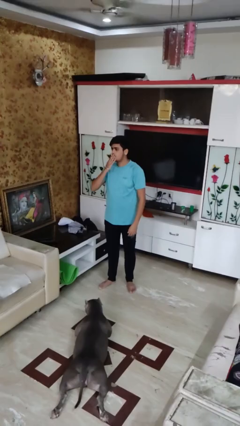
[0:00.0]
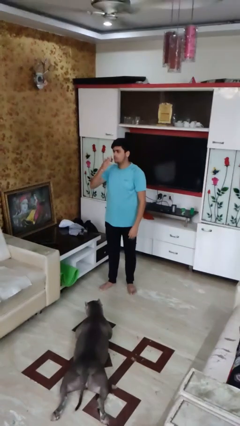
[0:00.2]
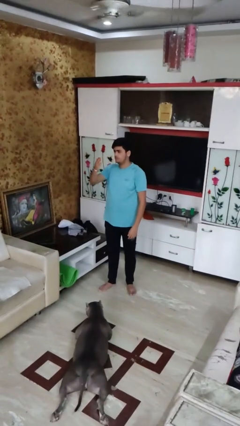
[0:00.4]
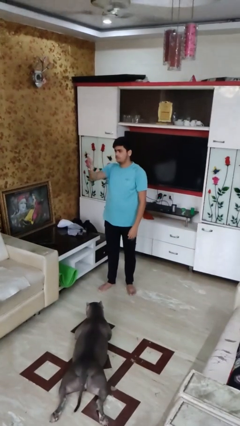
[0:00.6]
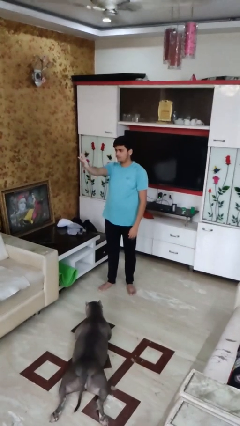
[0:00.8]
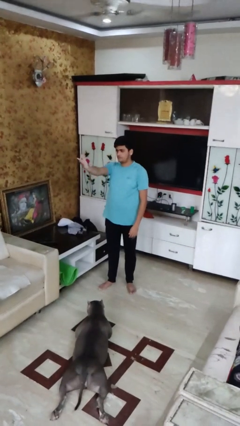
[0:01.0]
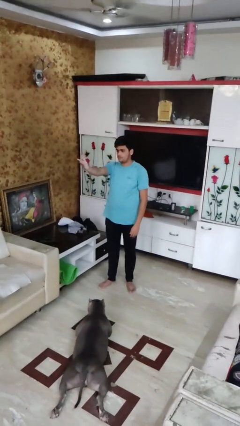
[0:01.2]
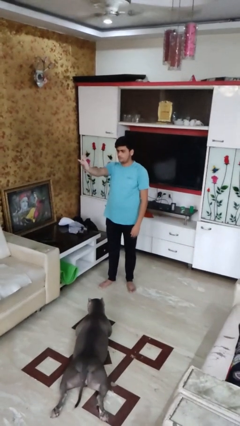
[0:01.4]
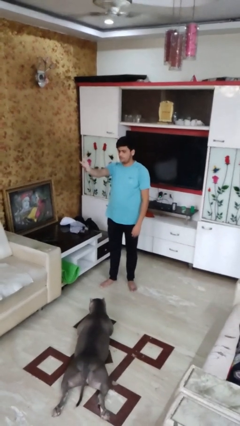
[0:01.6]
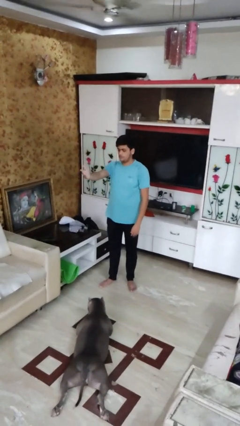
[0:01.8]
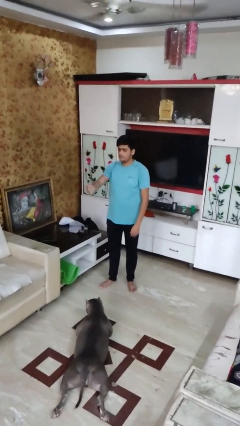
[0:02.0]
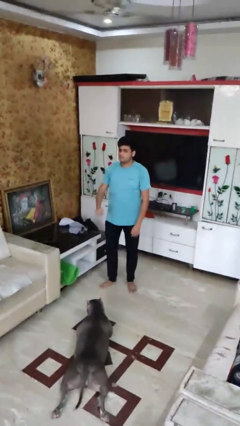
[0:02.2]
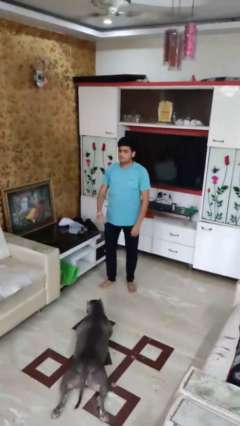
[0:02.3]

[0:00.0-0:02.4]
person gestures blow kiss

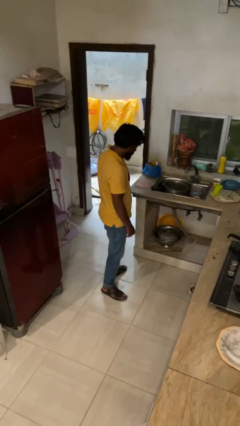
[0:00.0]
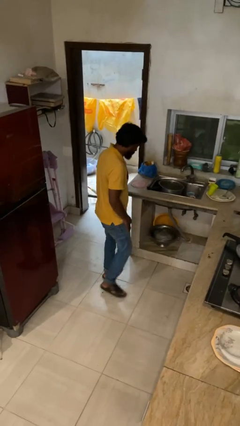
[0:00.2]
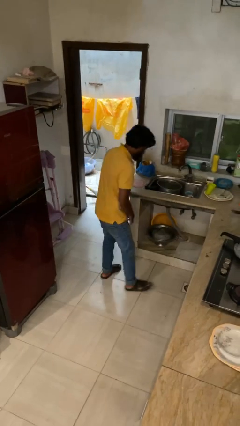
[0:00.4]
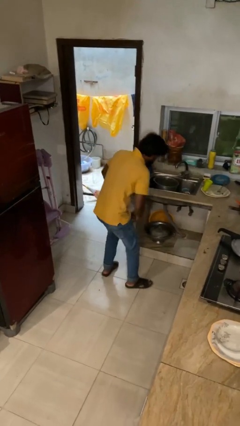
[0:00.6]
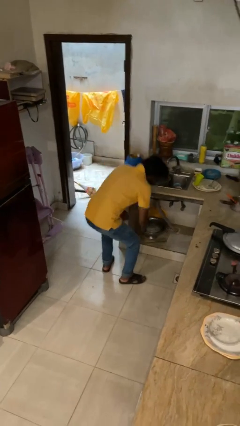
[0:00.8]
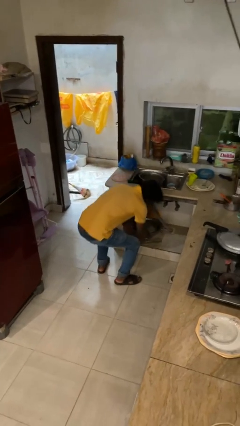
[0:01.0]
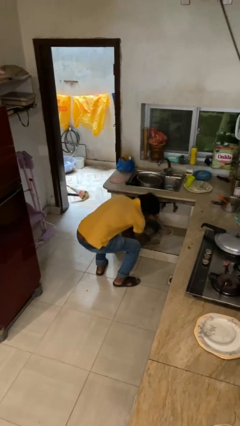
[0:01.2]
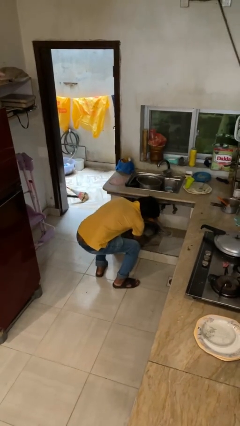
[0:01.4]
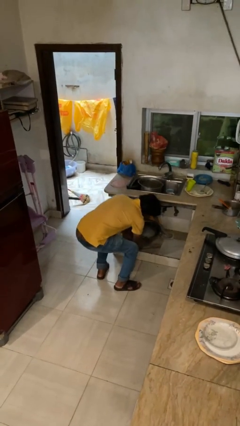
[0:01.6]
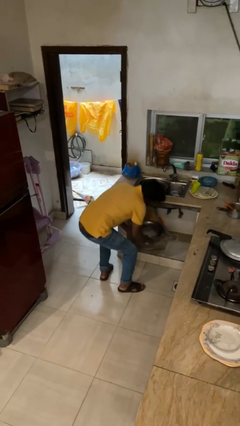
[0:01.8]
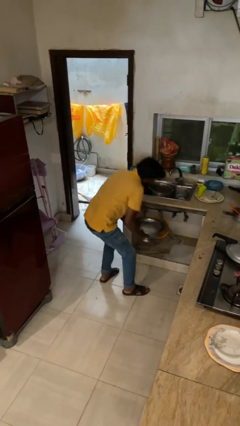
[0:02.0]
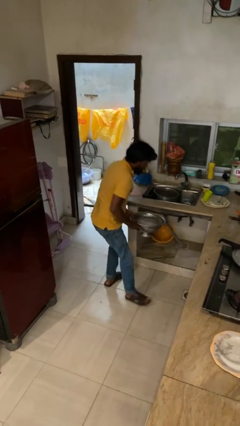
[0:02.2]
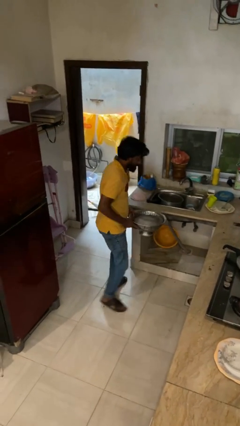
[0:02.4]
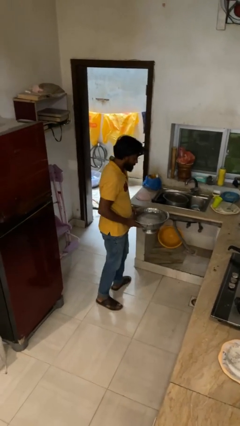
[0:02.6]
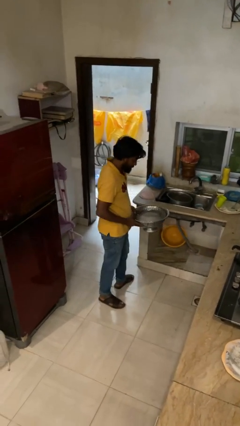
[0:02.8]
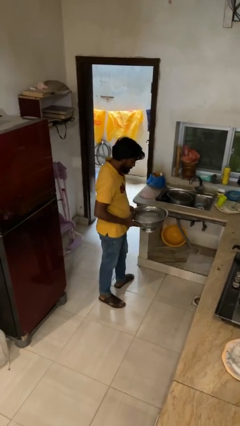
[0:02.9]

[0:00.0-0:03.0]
person picks up object from cabinet

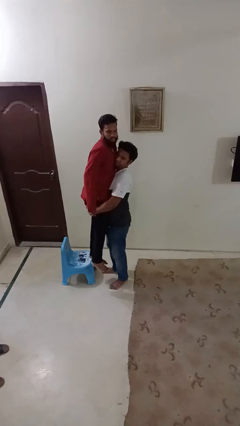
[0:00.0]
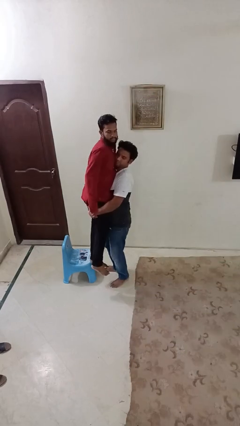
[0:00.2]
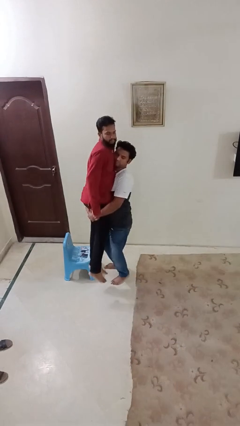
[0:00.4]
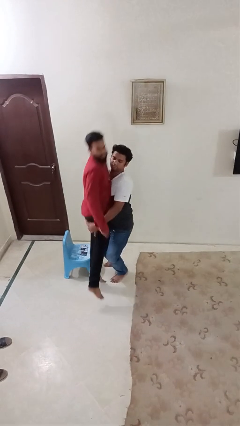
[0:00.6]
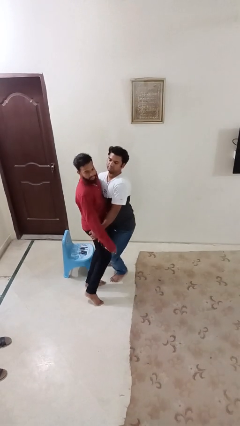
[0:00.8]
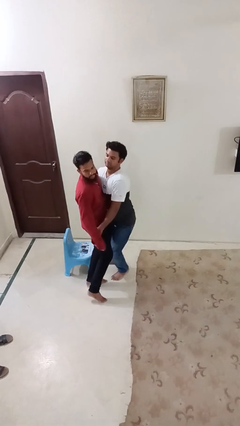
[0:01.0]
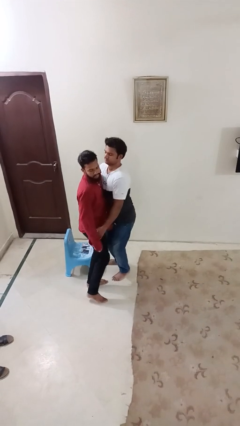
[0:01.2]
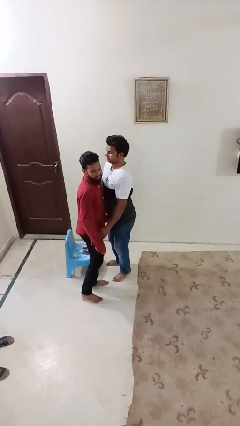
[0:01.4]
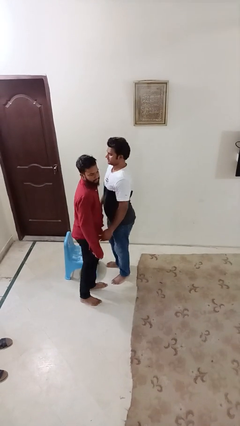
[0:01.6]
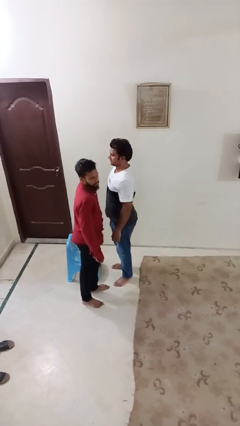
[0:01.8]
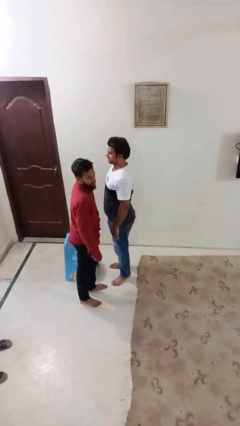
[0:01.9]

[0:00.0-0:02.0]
person puts down person

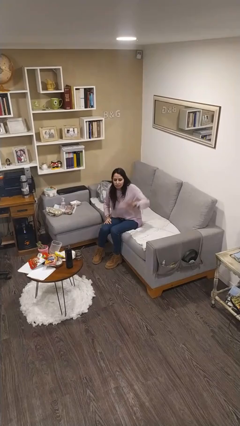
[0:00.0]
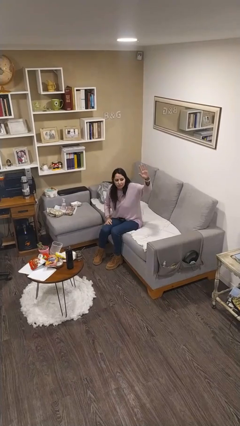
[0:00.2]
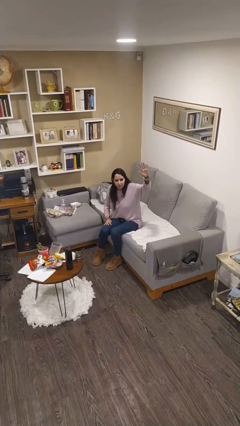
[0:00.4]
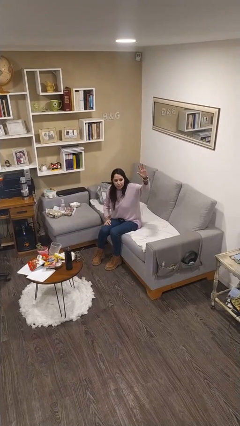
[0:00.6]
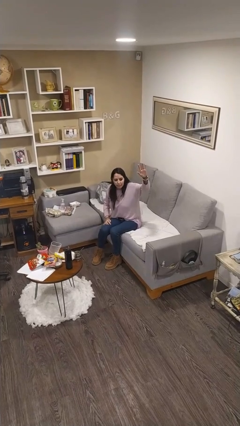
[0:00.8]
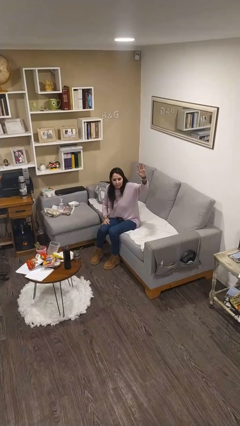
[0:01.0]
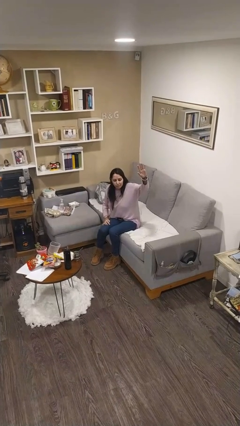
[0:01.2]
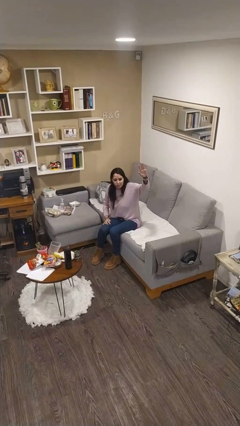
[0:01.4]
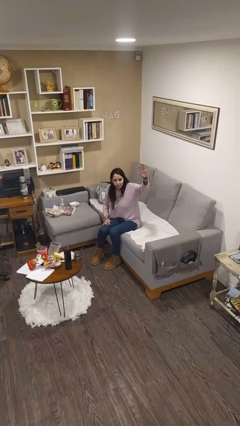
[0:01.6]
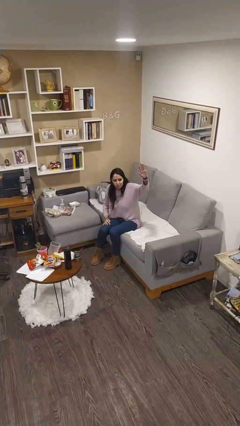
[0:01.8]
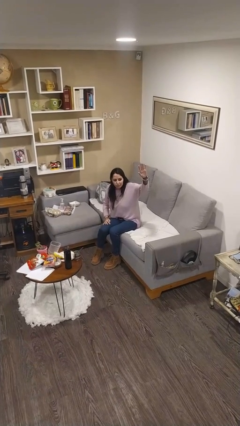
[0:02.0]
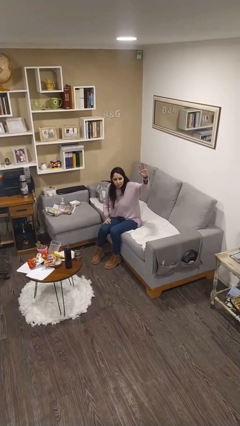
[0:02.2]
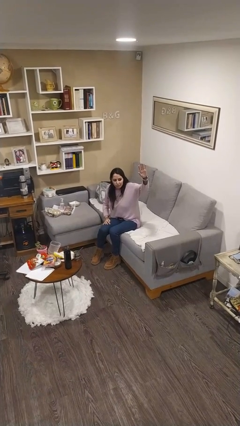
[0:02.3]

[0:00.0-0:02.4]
person gestures raise hand

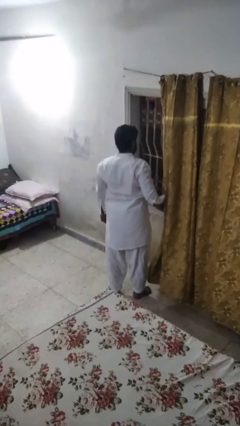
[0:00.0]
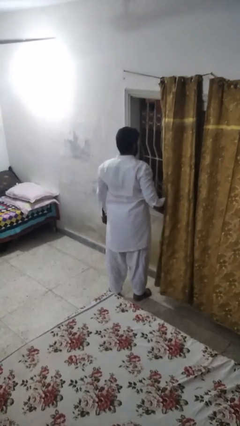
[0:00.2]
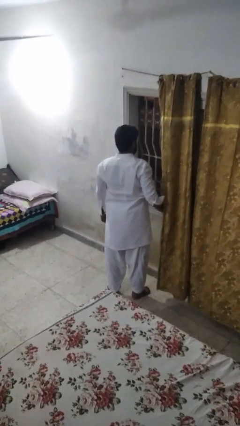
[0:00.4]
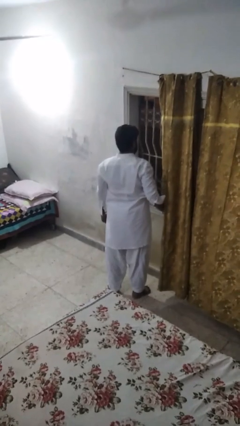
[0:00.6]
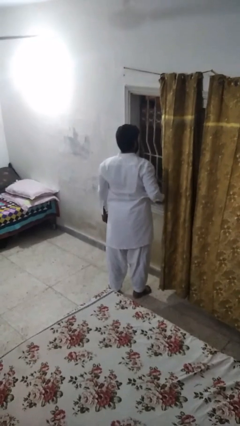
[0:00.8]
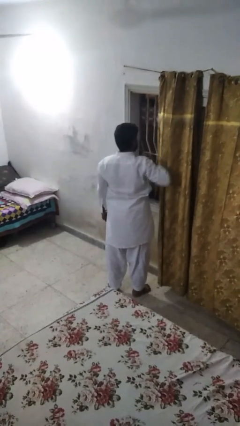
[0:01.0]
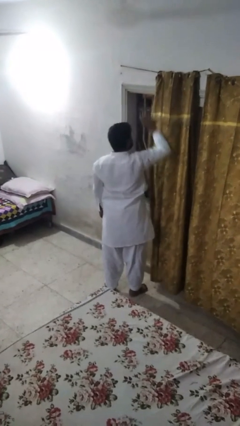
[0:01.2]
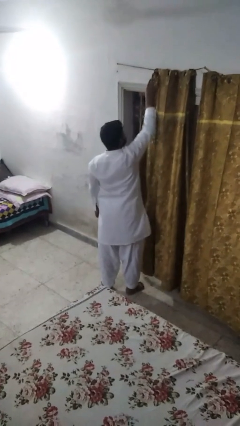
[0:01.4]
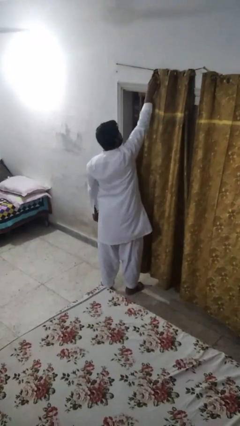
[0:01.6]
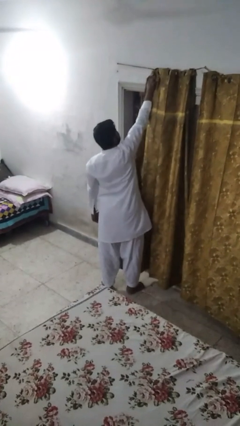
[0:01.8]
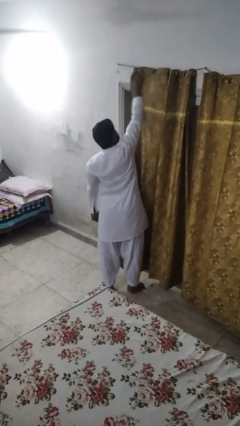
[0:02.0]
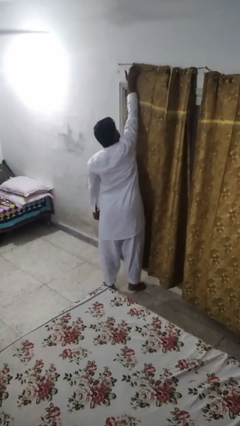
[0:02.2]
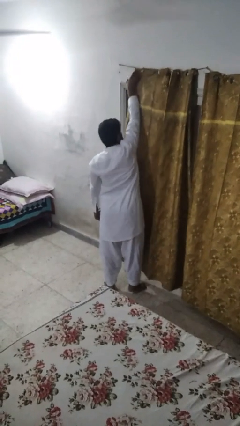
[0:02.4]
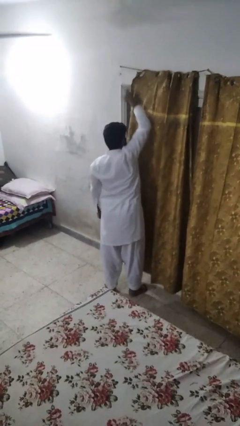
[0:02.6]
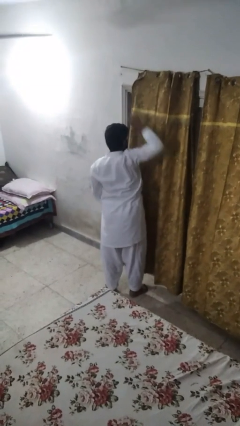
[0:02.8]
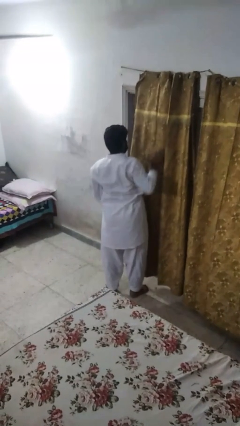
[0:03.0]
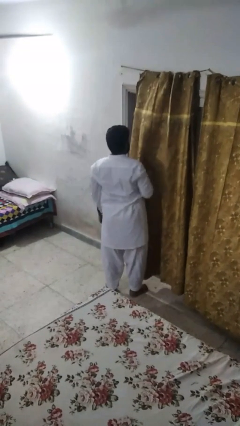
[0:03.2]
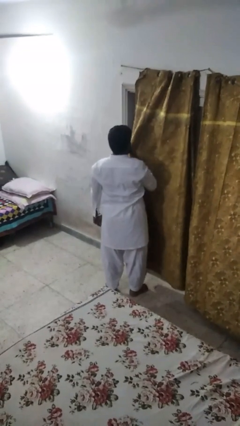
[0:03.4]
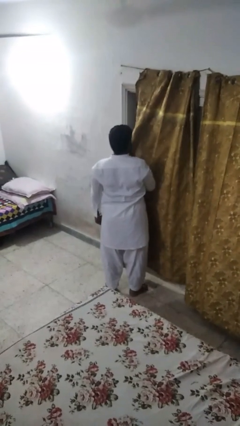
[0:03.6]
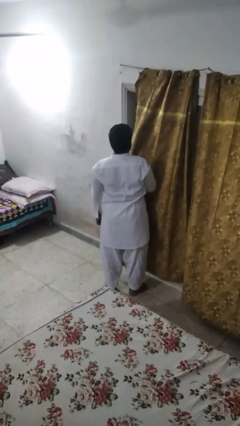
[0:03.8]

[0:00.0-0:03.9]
person closes curtains

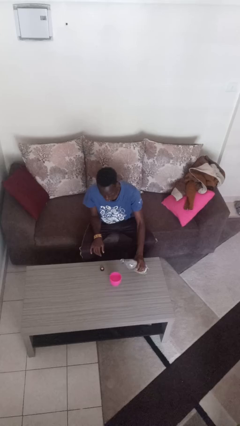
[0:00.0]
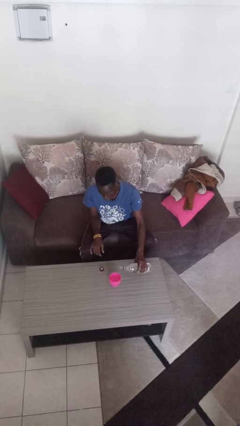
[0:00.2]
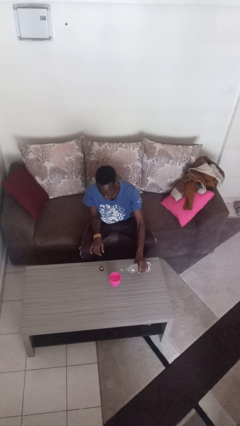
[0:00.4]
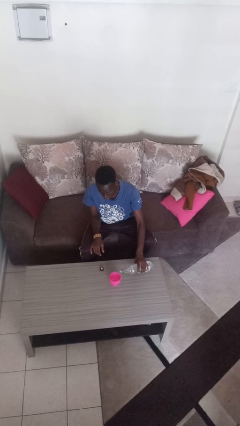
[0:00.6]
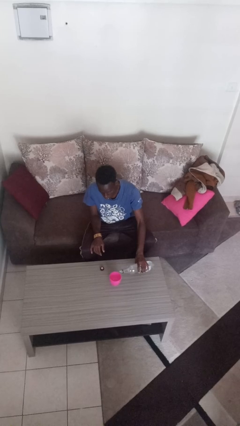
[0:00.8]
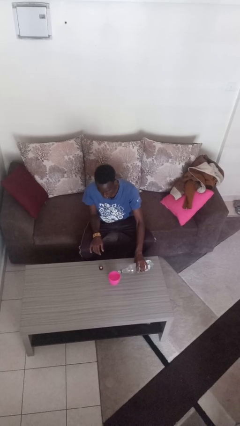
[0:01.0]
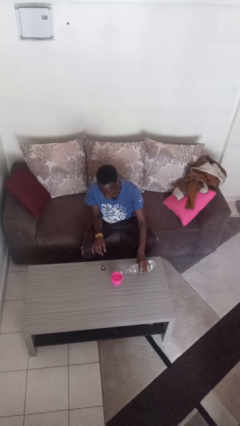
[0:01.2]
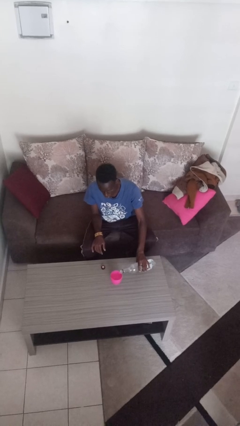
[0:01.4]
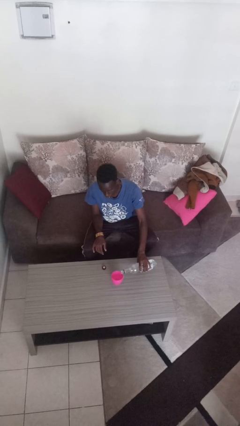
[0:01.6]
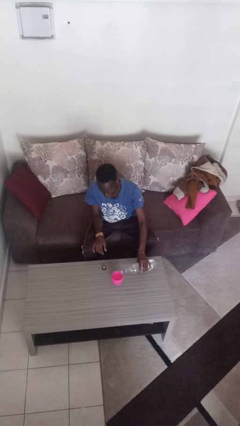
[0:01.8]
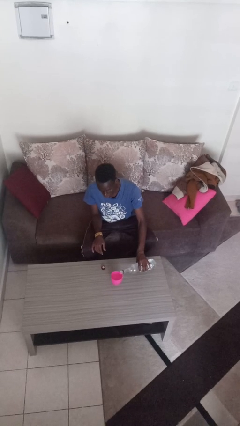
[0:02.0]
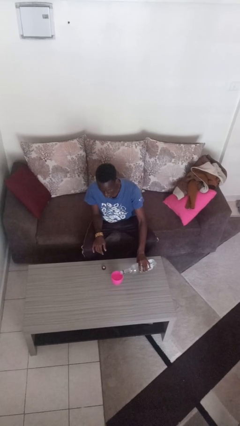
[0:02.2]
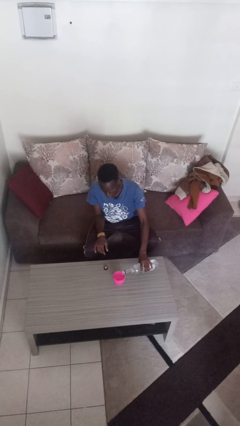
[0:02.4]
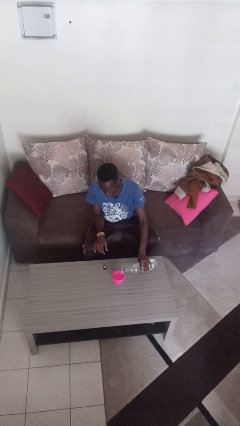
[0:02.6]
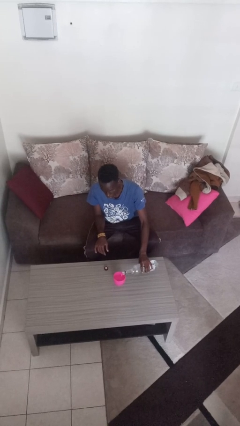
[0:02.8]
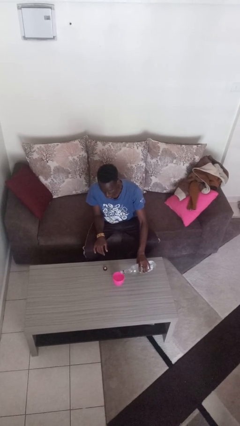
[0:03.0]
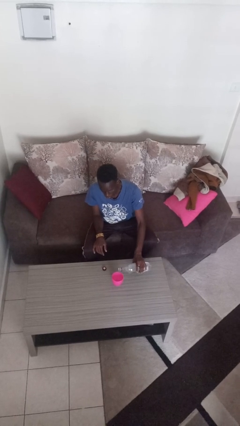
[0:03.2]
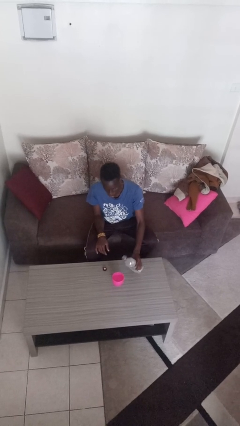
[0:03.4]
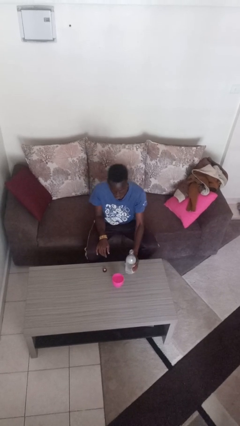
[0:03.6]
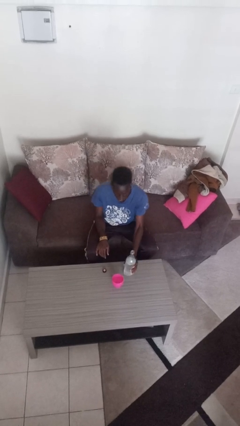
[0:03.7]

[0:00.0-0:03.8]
person pours liquid into cup

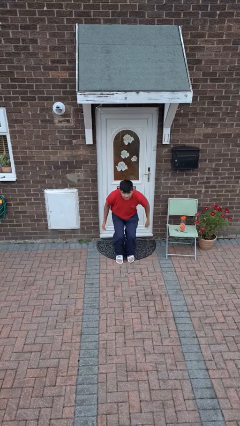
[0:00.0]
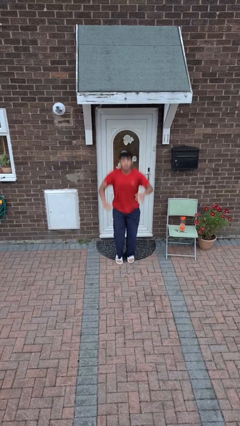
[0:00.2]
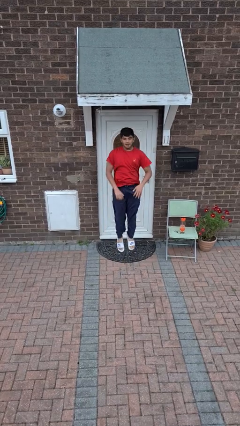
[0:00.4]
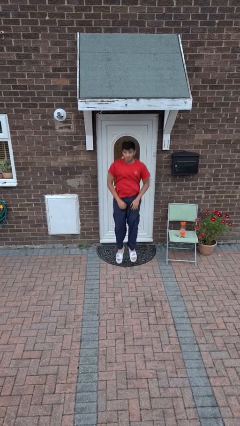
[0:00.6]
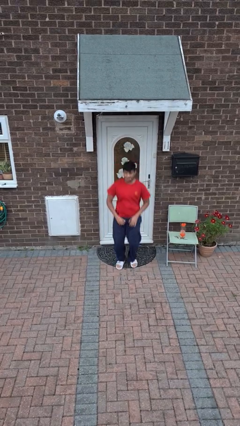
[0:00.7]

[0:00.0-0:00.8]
person jumps
